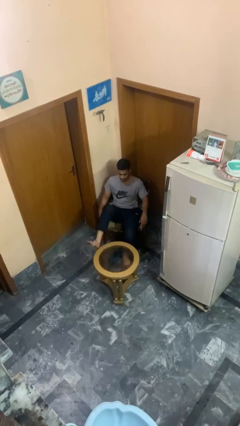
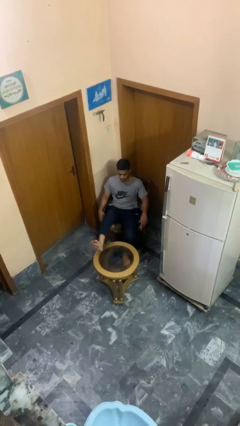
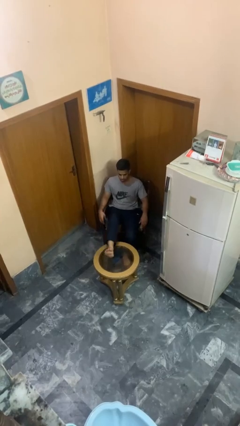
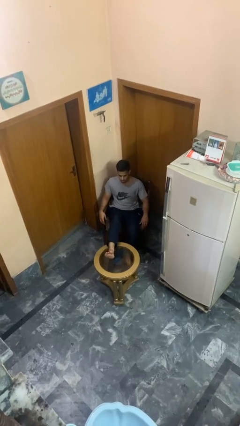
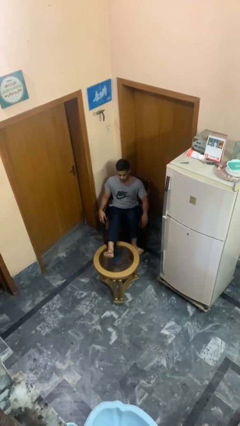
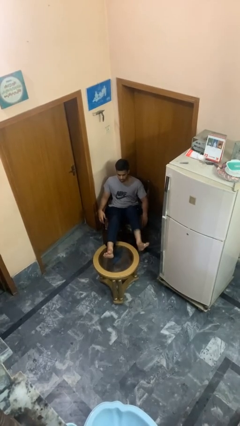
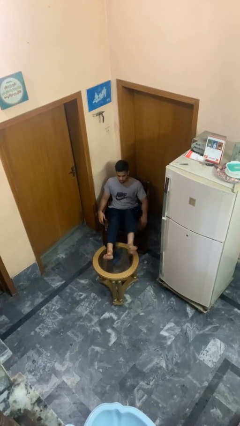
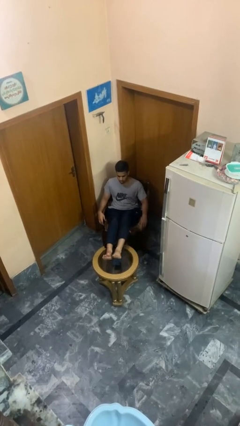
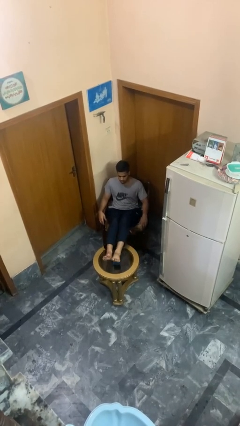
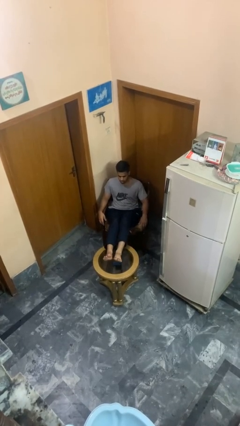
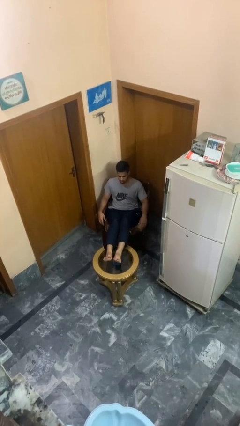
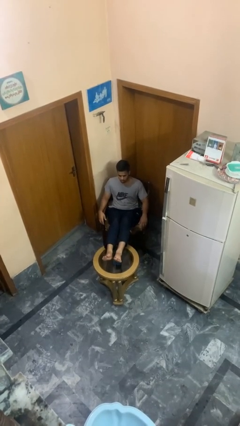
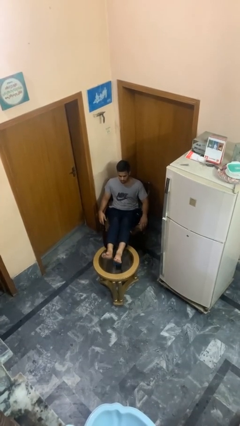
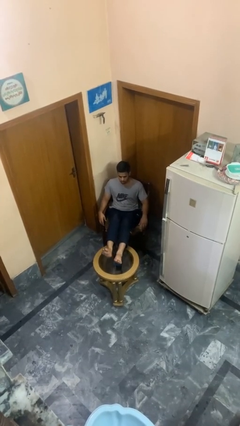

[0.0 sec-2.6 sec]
person puts feet up

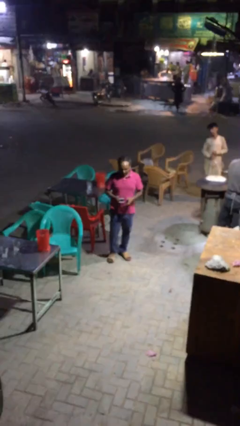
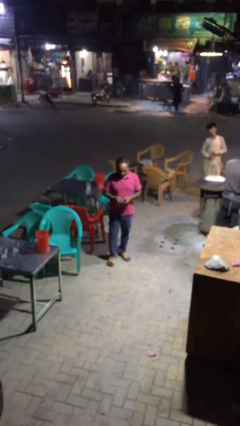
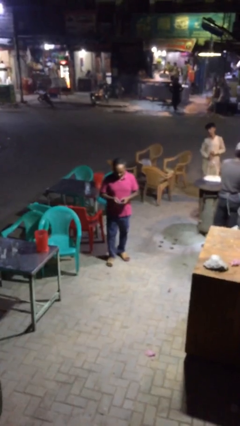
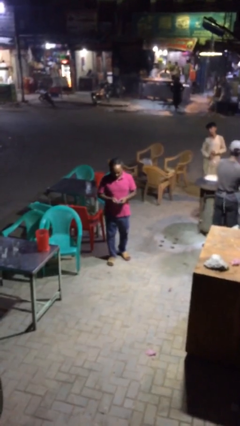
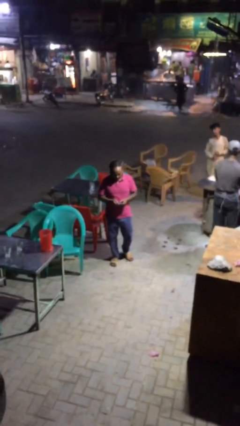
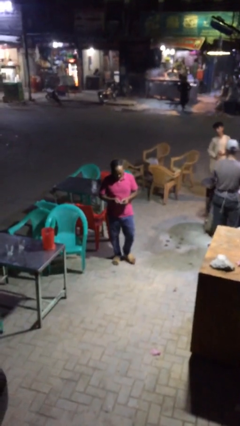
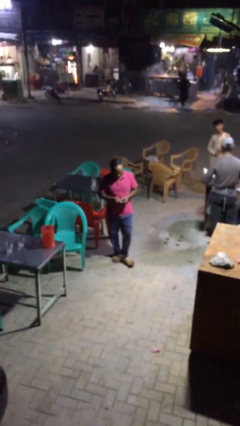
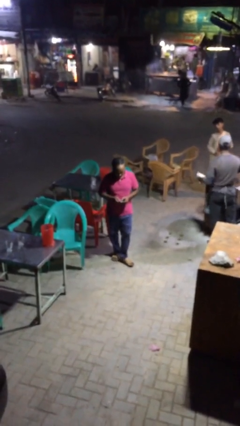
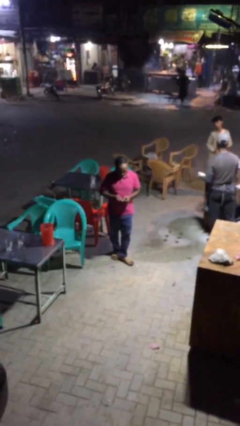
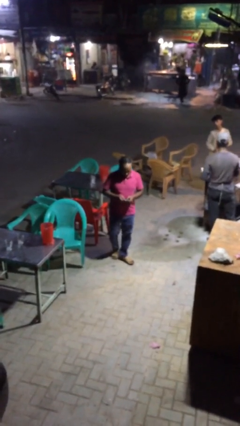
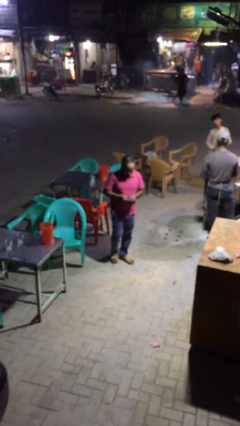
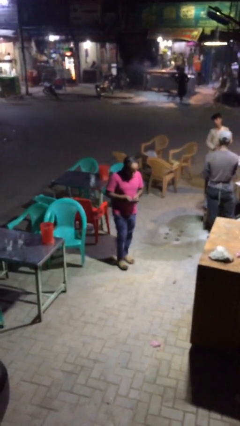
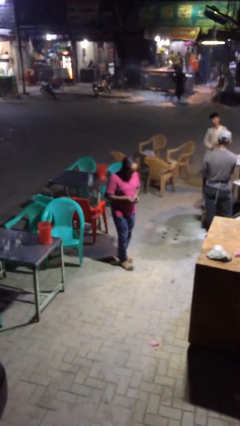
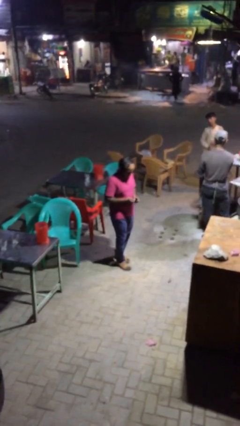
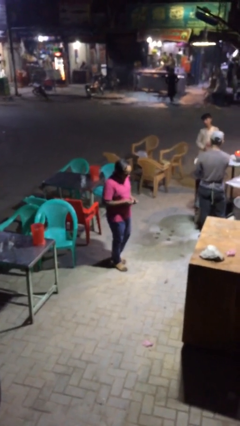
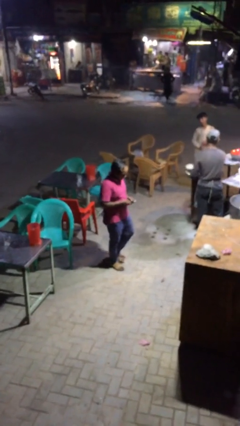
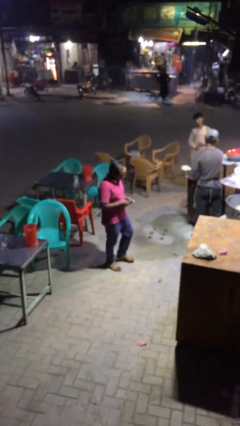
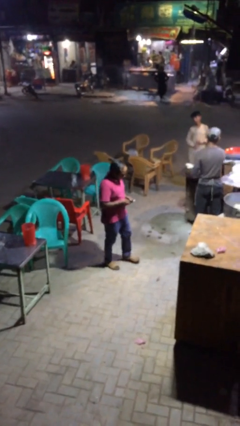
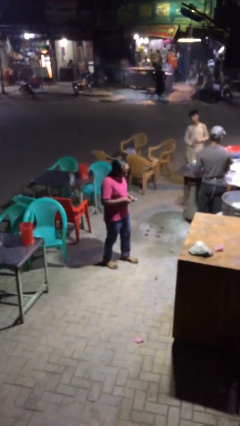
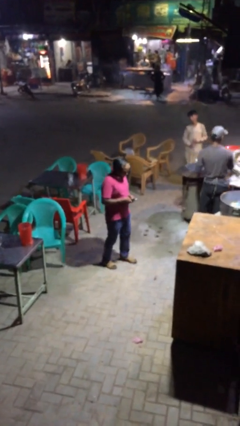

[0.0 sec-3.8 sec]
person texts on phone

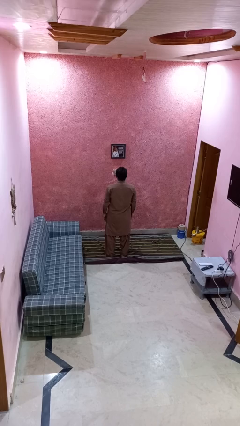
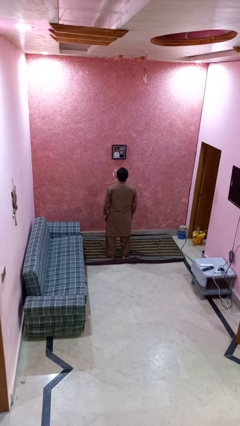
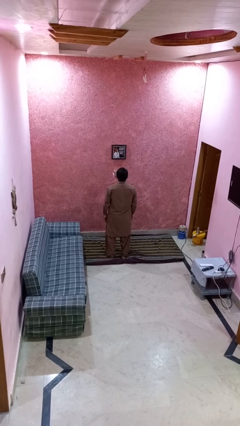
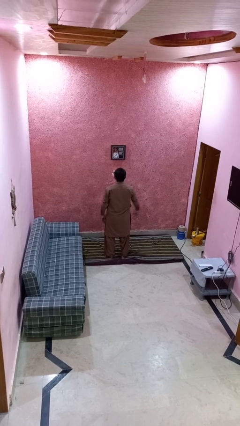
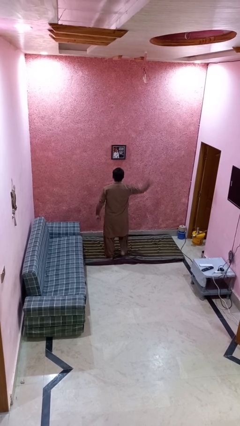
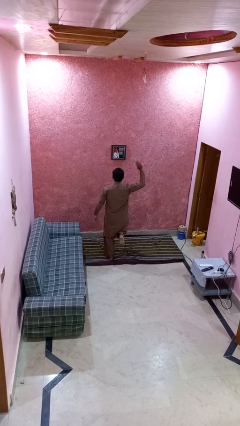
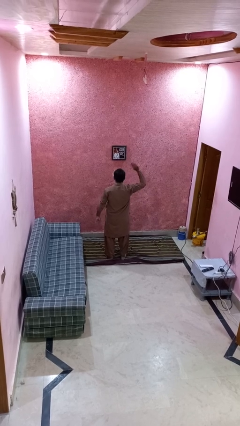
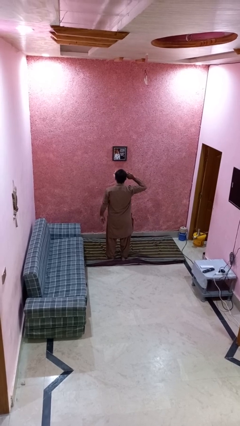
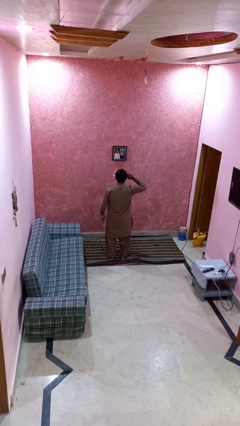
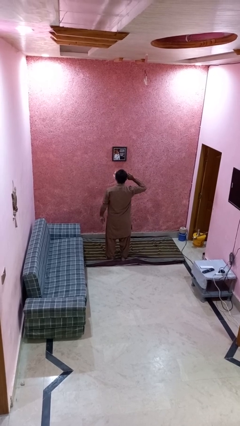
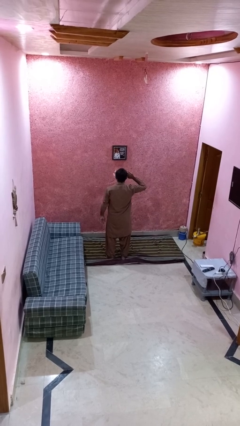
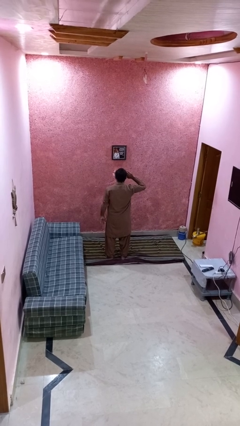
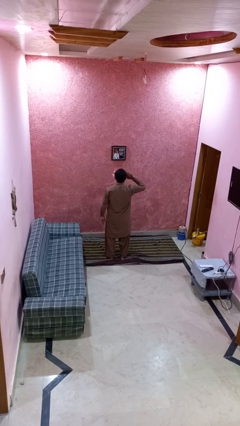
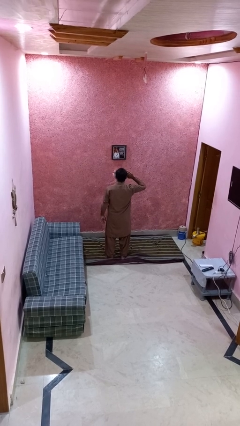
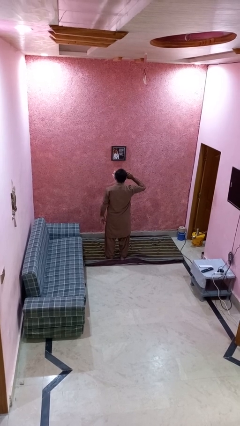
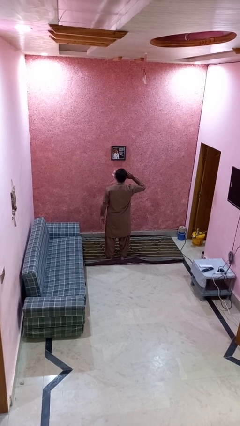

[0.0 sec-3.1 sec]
person salutes

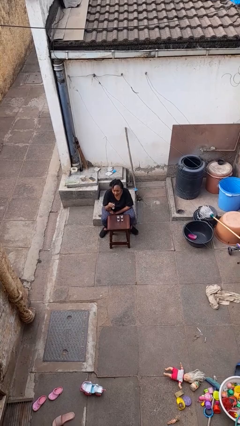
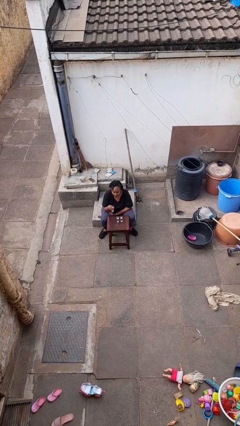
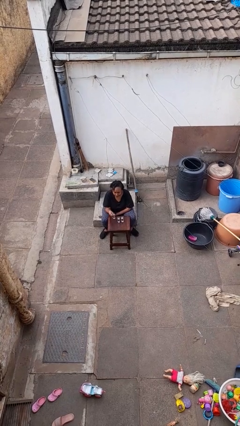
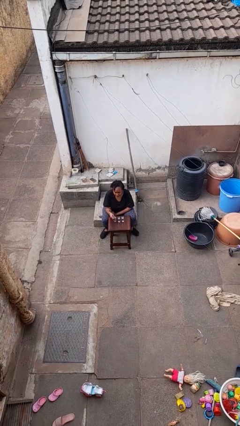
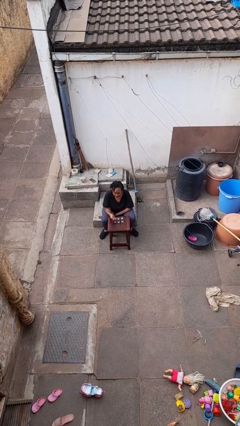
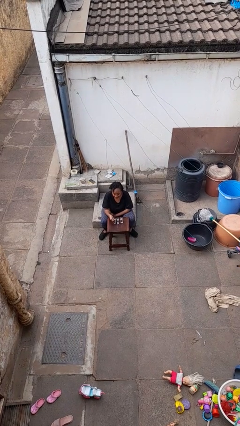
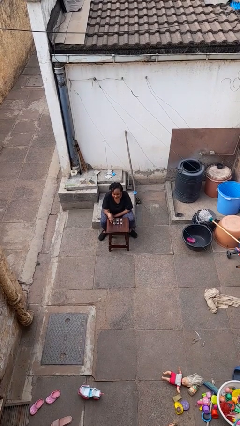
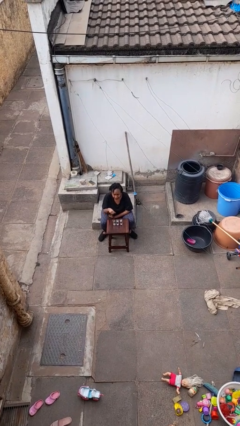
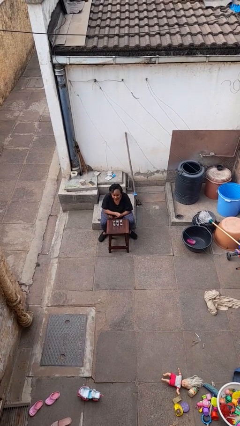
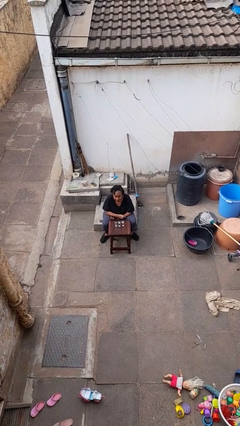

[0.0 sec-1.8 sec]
person puts down object on table

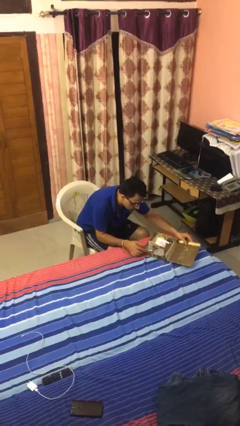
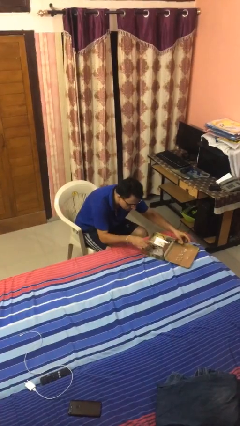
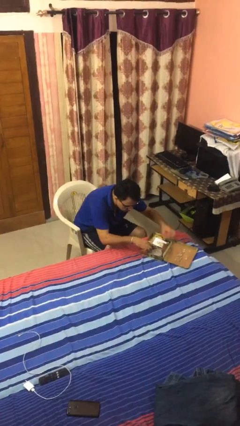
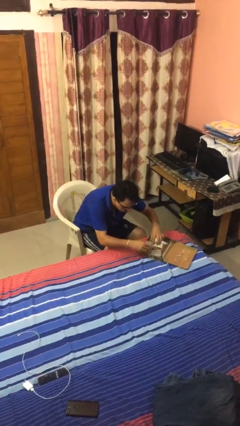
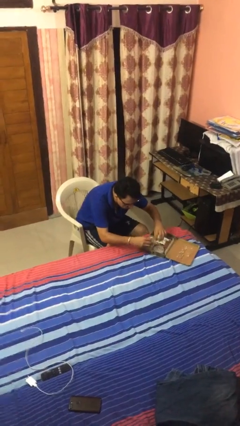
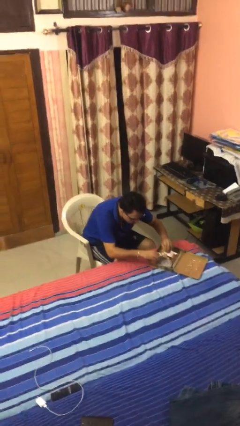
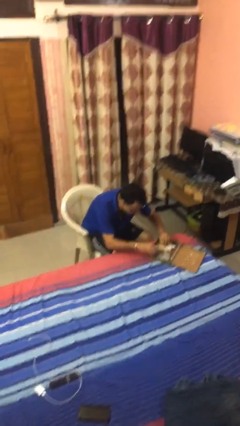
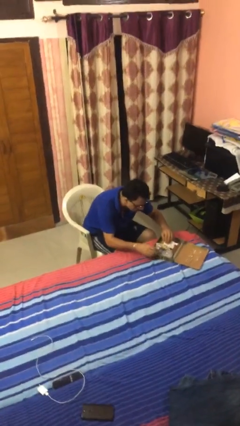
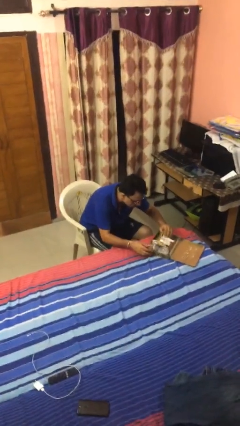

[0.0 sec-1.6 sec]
person searches jewelry box

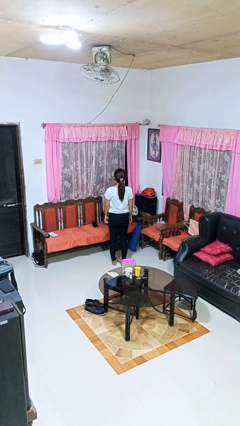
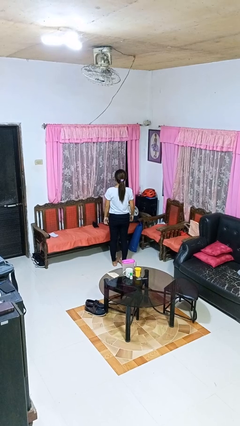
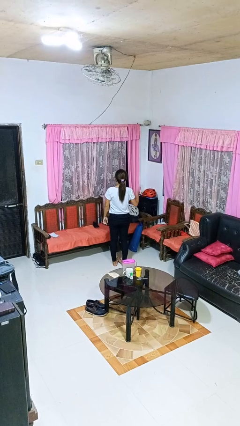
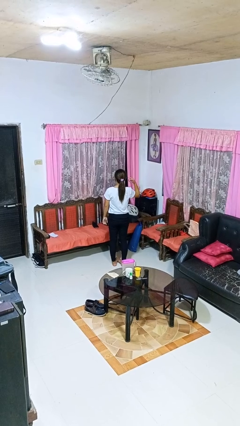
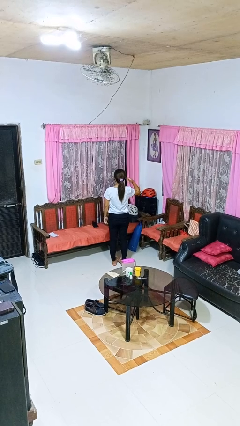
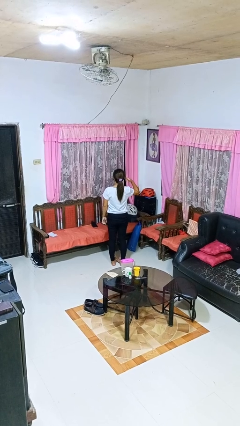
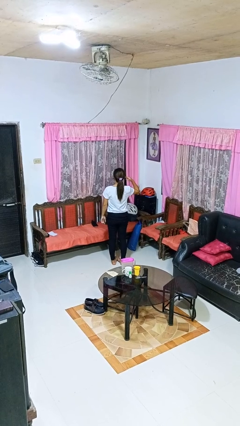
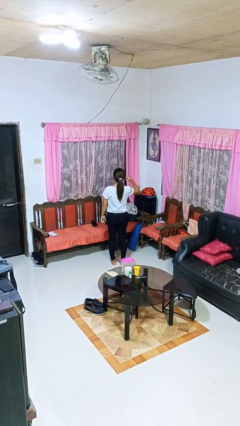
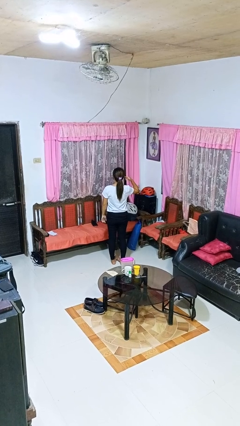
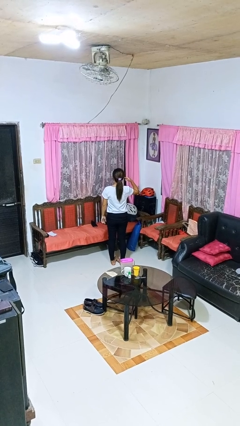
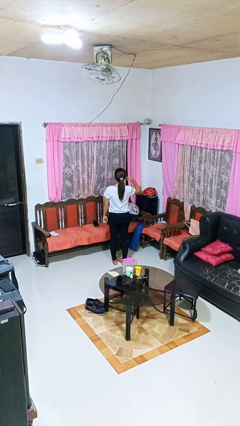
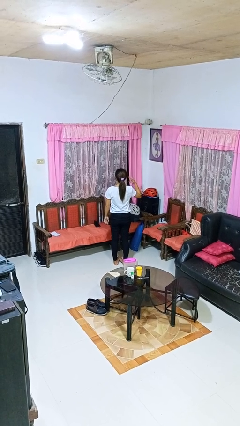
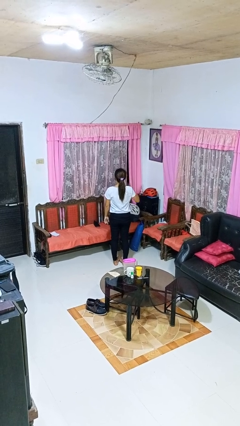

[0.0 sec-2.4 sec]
person gestures listen closely

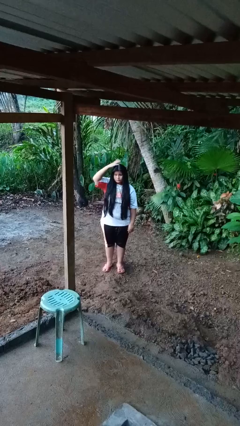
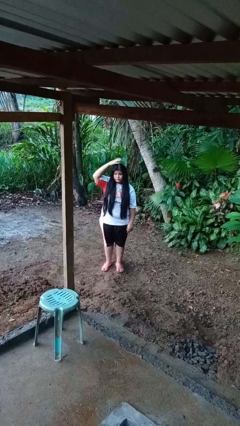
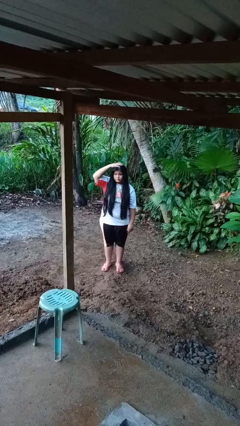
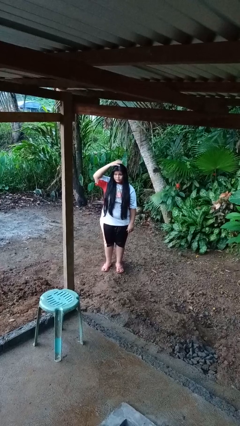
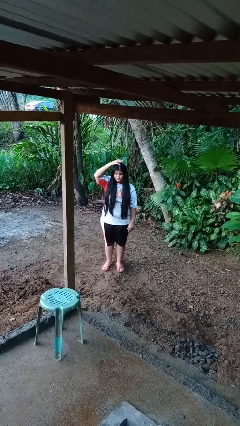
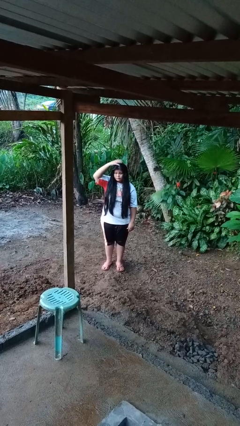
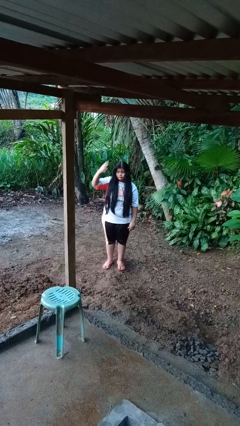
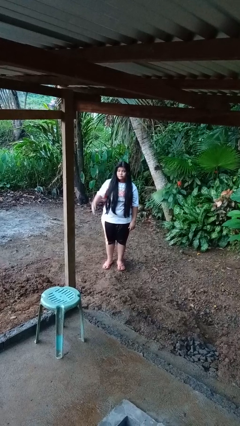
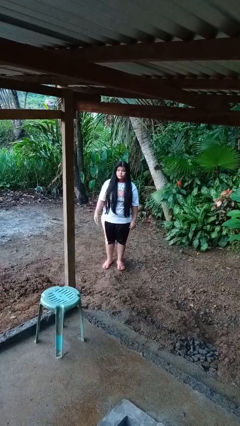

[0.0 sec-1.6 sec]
person pats head

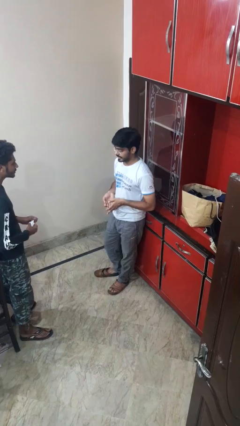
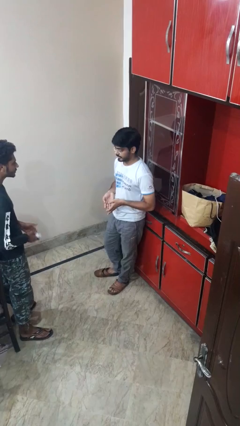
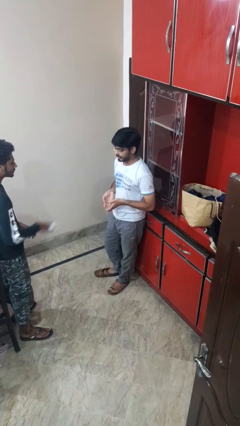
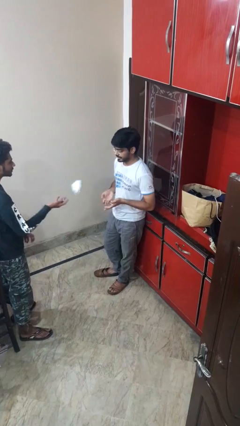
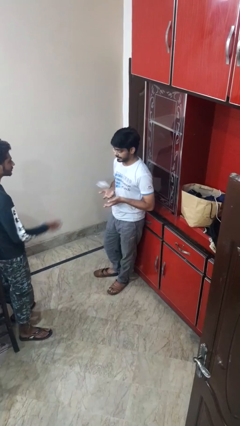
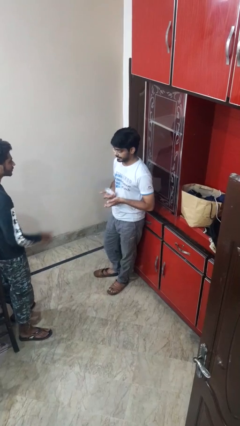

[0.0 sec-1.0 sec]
person catches object from person
